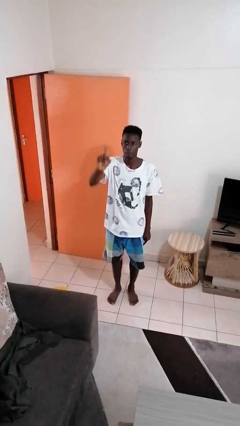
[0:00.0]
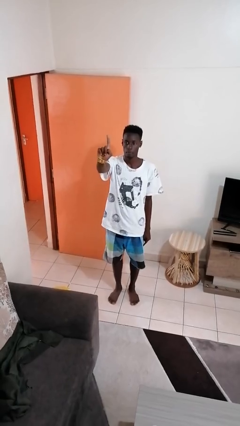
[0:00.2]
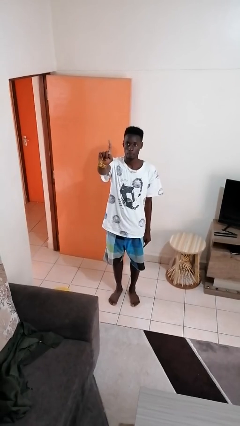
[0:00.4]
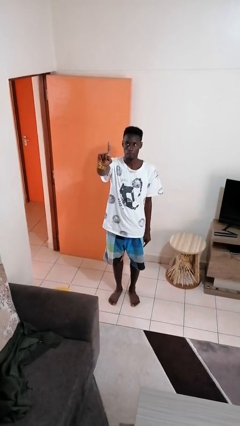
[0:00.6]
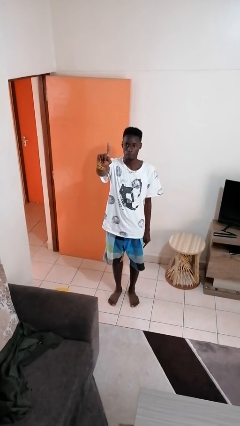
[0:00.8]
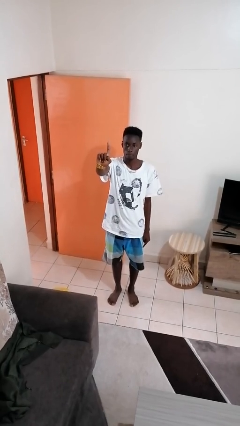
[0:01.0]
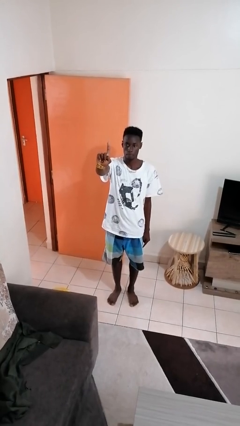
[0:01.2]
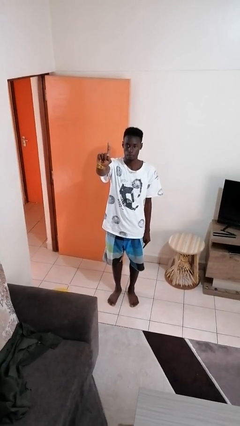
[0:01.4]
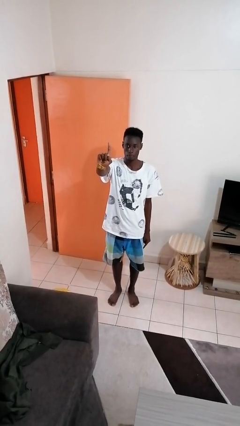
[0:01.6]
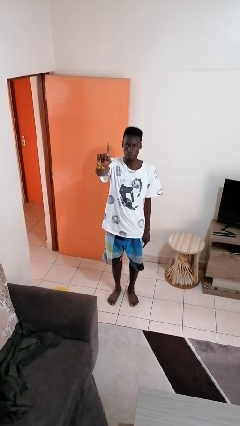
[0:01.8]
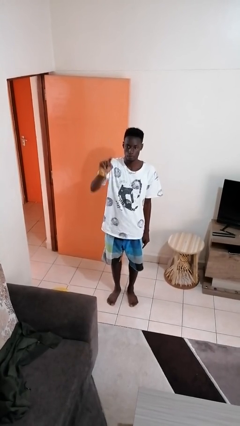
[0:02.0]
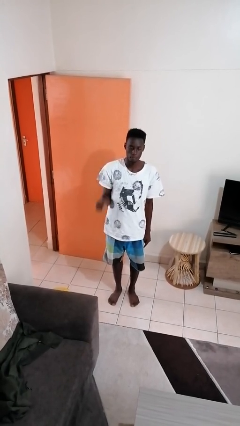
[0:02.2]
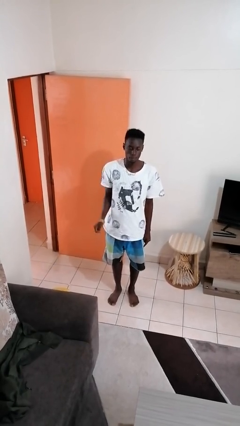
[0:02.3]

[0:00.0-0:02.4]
person gestures number one

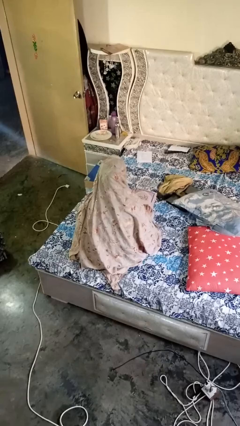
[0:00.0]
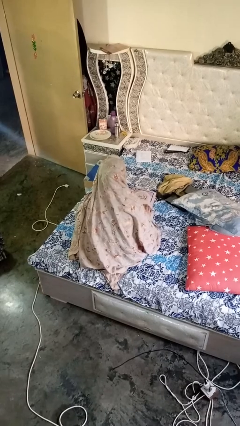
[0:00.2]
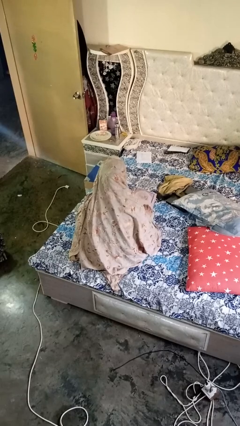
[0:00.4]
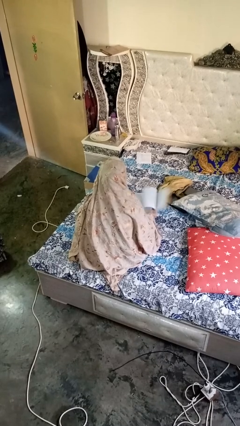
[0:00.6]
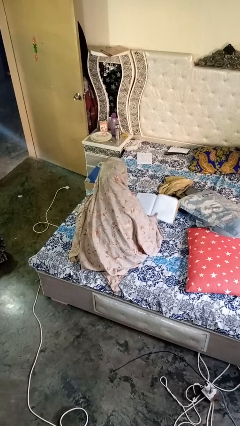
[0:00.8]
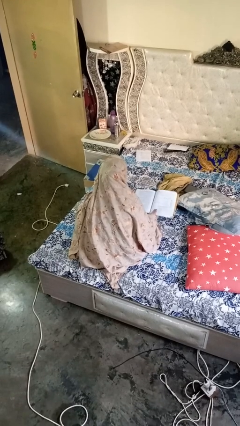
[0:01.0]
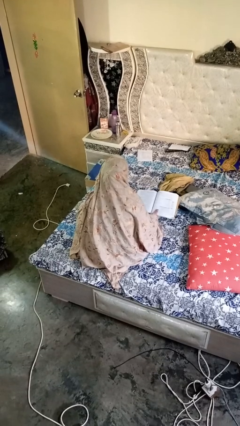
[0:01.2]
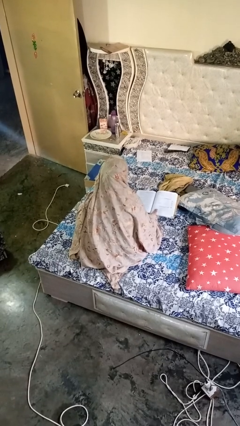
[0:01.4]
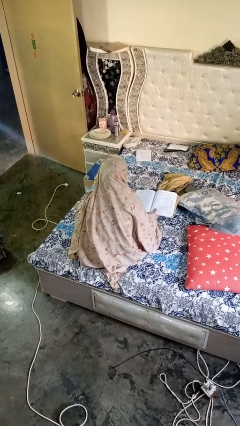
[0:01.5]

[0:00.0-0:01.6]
person reads book

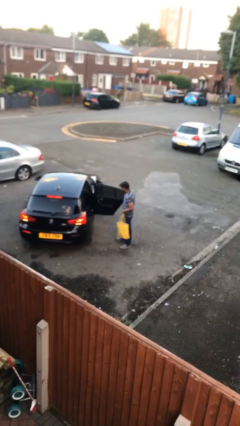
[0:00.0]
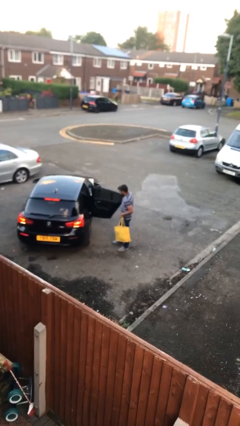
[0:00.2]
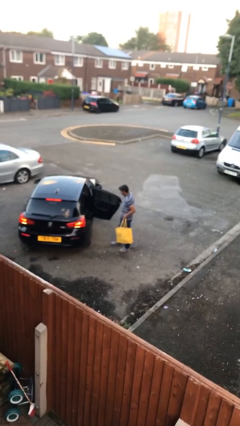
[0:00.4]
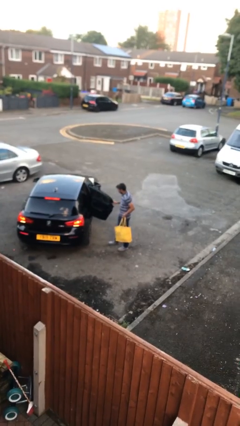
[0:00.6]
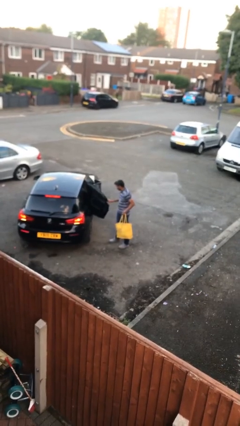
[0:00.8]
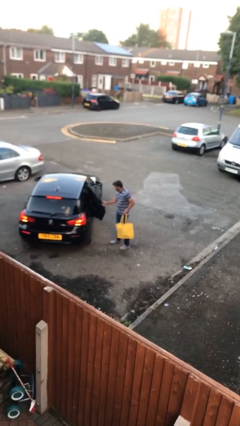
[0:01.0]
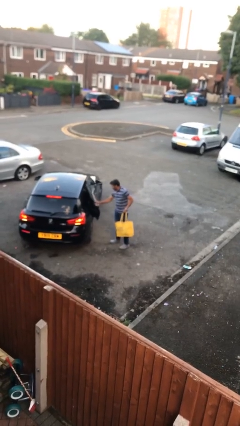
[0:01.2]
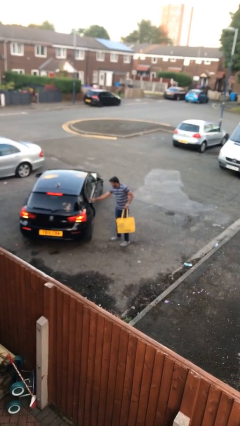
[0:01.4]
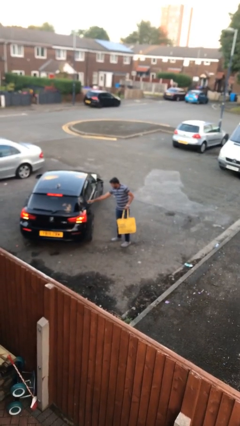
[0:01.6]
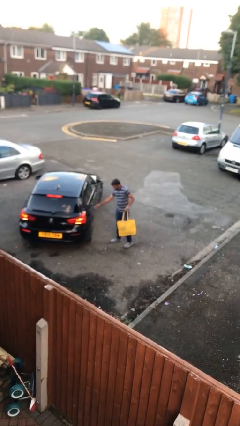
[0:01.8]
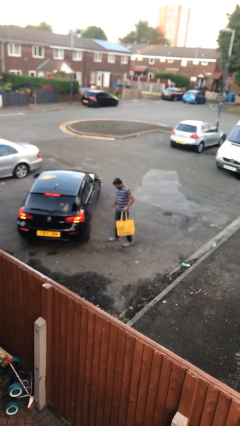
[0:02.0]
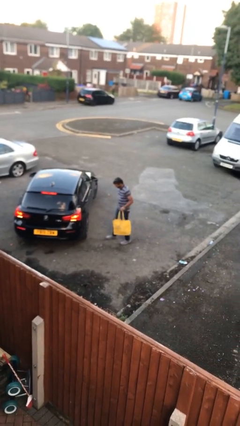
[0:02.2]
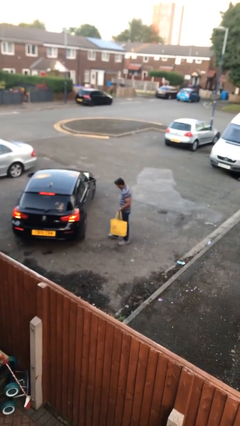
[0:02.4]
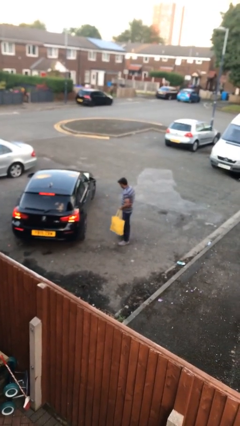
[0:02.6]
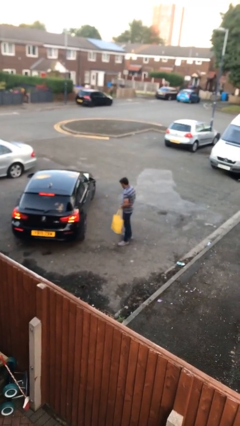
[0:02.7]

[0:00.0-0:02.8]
person closes car door

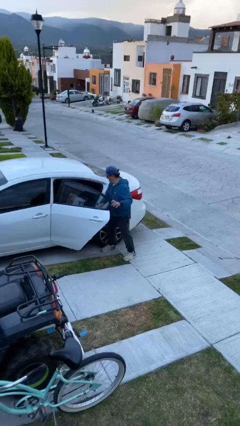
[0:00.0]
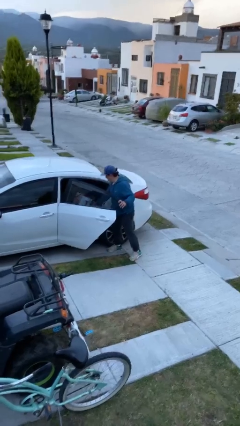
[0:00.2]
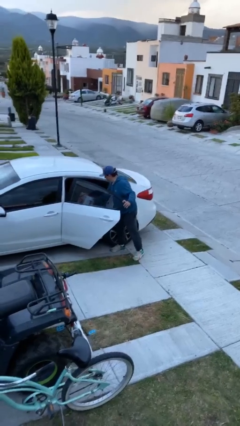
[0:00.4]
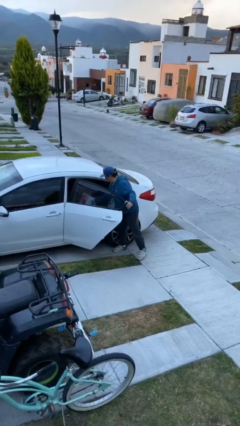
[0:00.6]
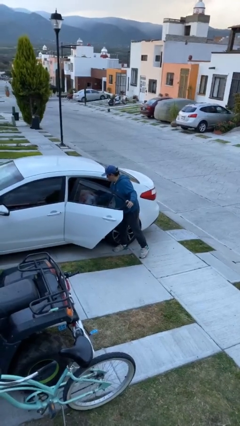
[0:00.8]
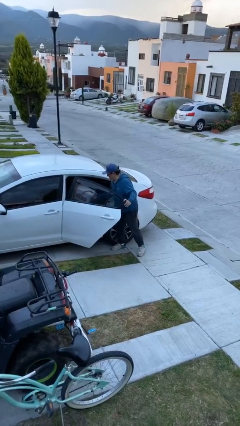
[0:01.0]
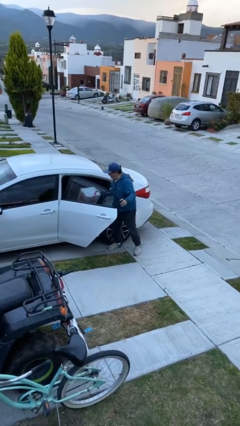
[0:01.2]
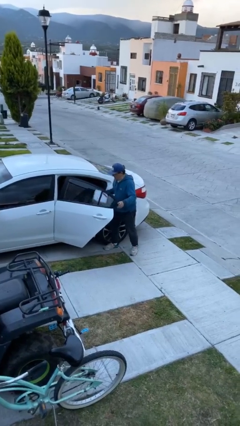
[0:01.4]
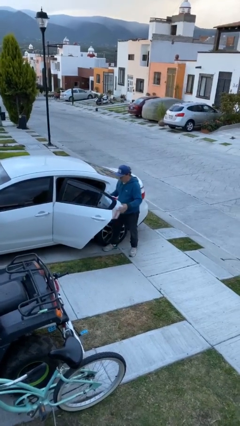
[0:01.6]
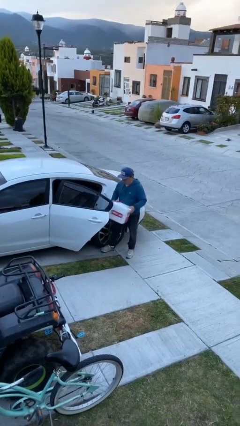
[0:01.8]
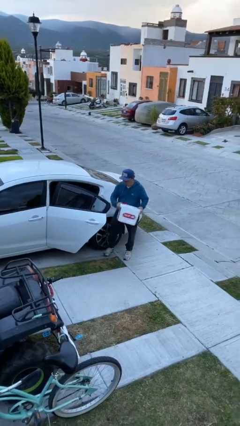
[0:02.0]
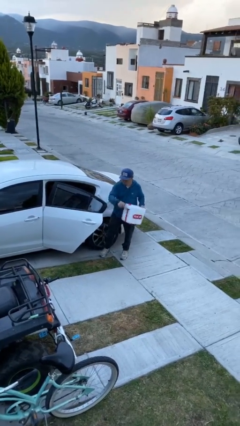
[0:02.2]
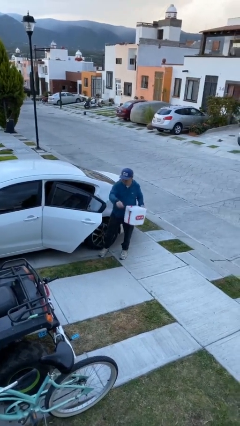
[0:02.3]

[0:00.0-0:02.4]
person unloads car

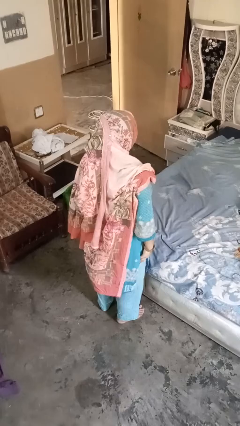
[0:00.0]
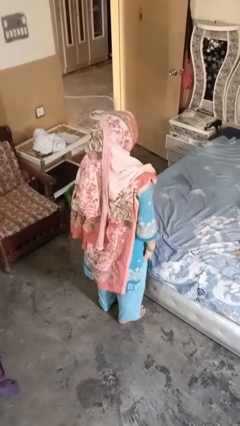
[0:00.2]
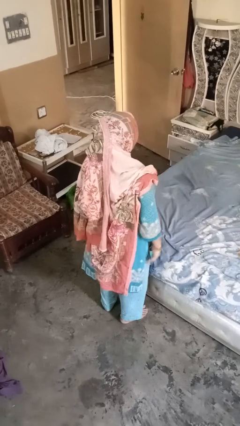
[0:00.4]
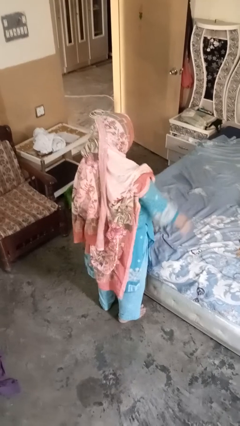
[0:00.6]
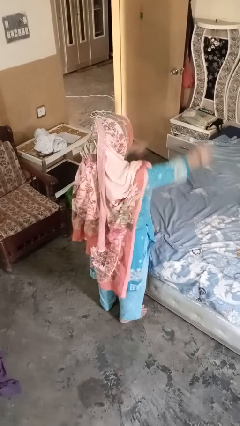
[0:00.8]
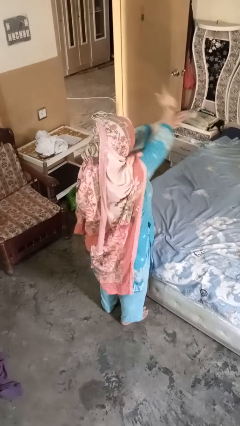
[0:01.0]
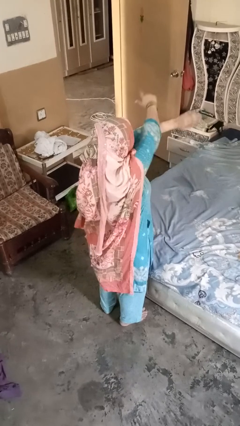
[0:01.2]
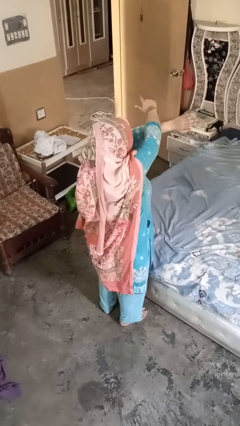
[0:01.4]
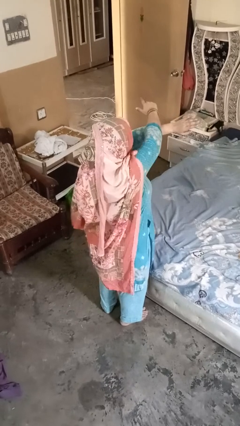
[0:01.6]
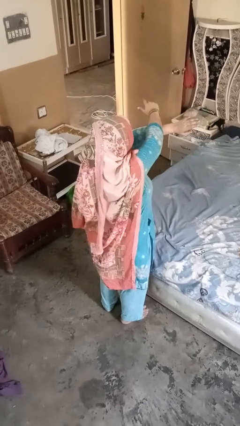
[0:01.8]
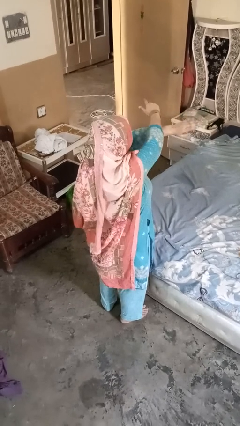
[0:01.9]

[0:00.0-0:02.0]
person gestures arms x

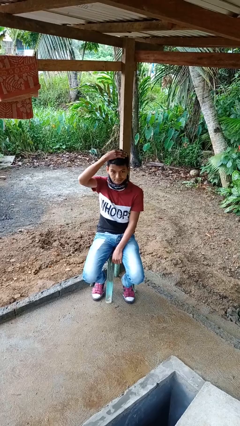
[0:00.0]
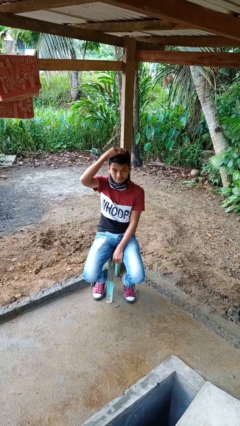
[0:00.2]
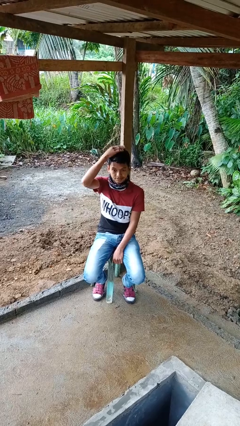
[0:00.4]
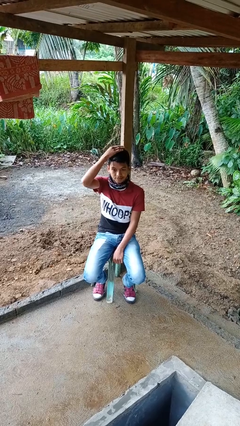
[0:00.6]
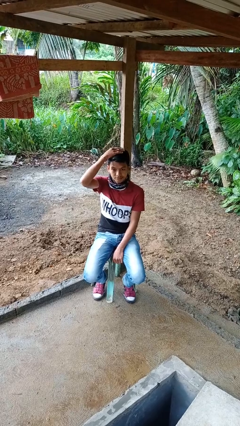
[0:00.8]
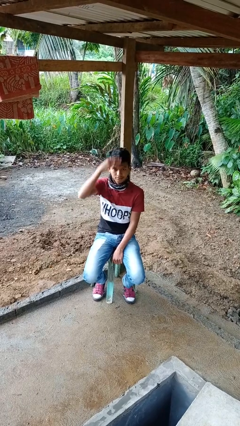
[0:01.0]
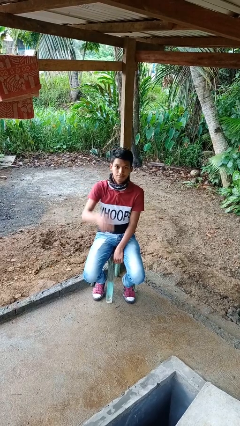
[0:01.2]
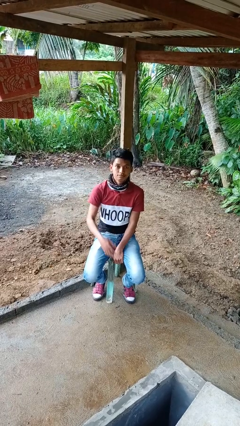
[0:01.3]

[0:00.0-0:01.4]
person pats head

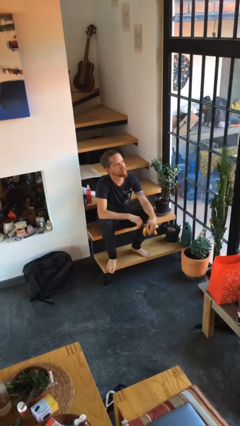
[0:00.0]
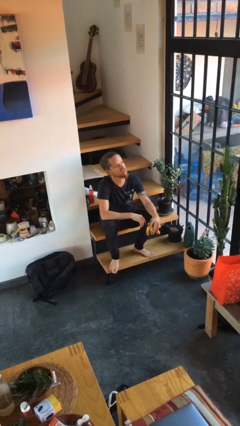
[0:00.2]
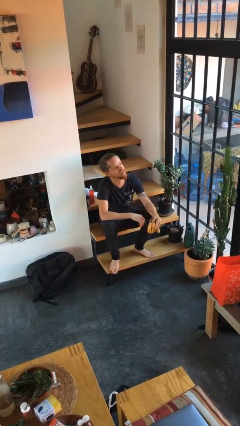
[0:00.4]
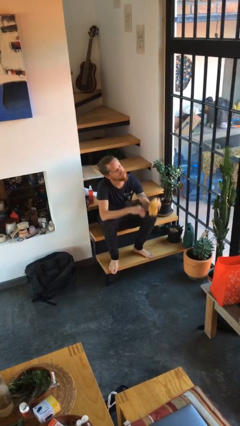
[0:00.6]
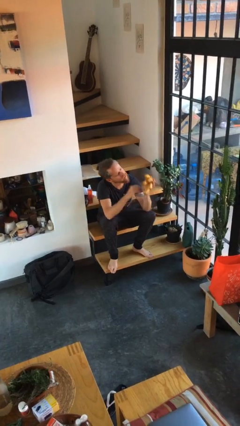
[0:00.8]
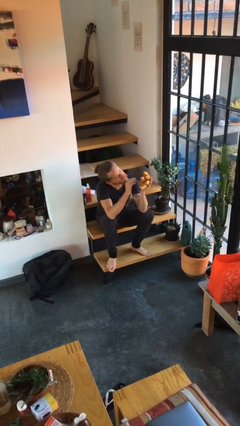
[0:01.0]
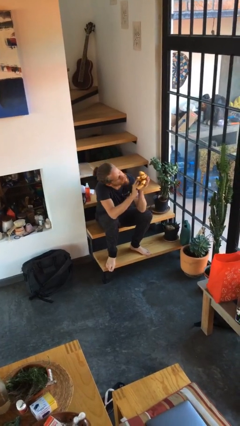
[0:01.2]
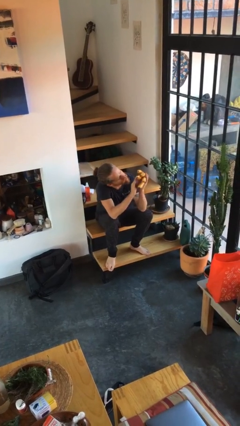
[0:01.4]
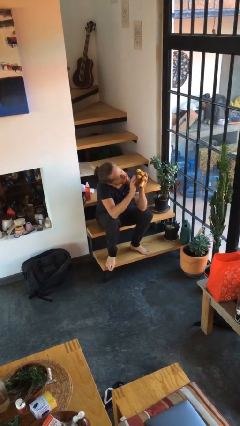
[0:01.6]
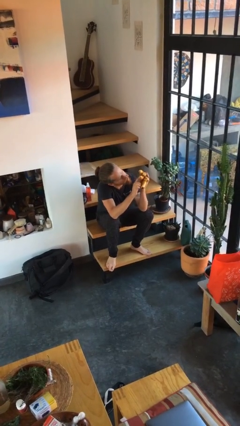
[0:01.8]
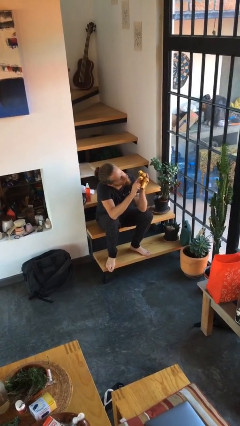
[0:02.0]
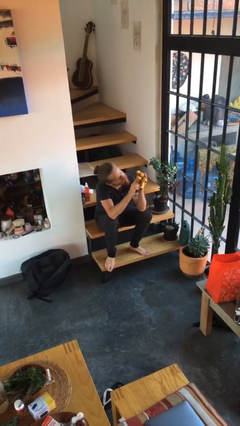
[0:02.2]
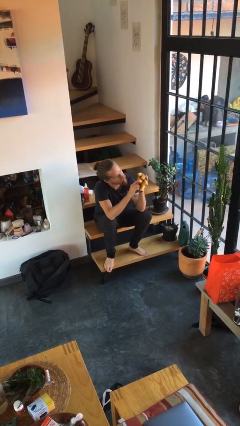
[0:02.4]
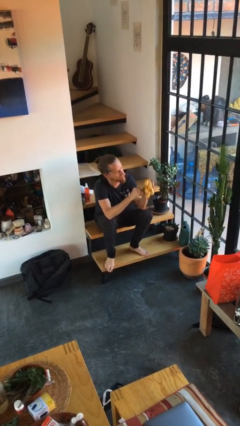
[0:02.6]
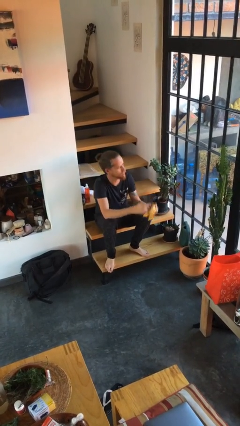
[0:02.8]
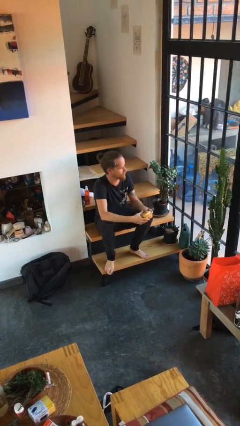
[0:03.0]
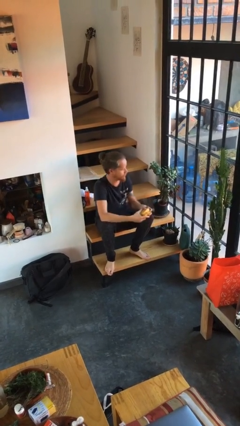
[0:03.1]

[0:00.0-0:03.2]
person taps object with finger

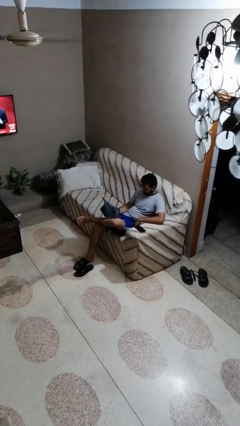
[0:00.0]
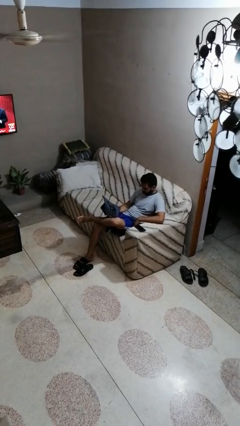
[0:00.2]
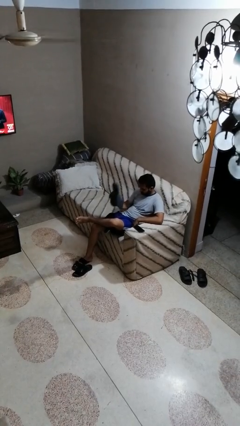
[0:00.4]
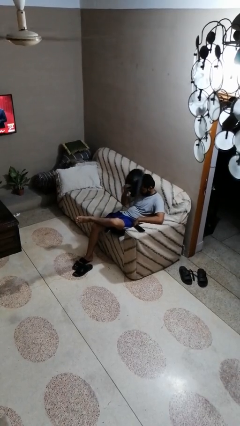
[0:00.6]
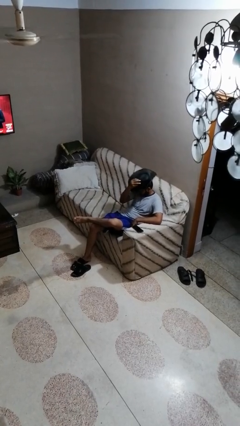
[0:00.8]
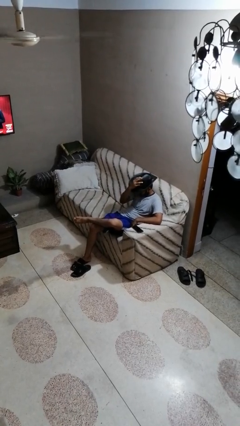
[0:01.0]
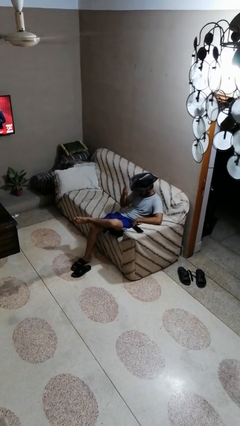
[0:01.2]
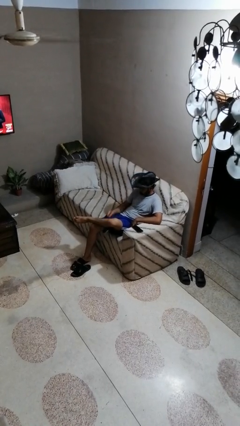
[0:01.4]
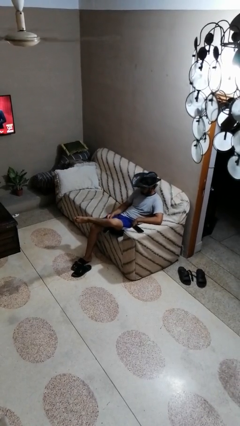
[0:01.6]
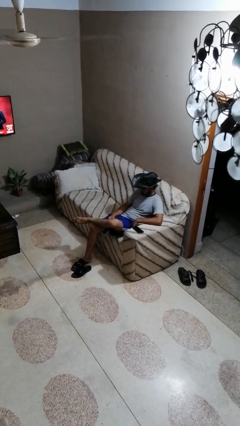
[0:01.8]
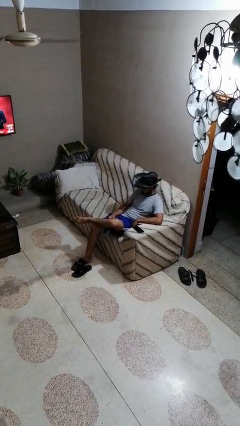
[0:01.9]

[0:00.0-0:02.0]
person puts on hat
